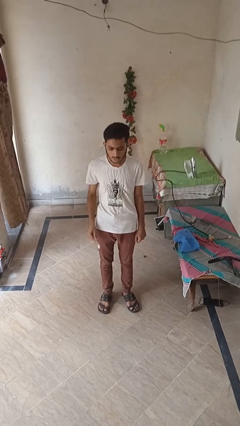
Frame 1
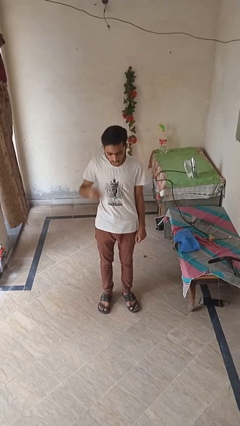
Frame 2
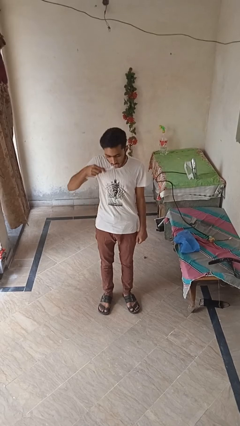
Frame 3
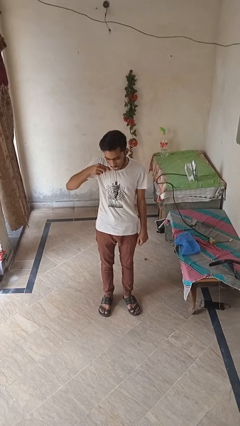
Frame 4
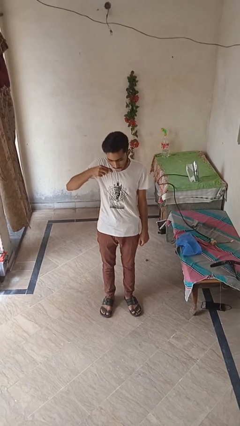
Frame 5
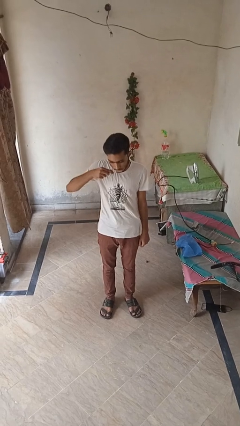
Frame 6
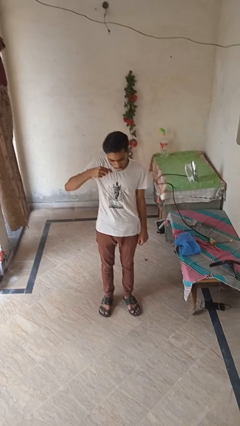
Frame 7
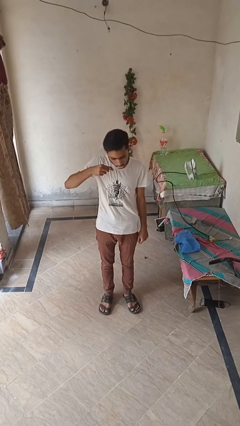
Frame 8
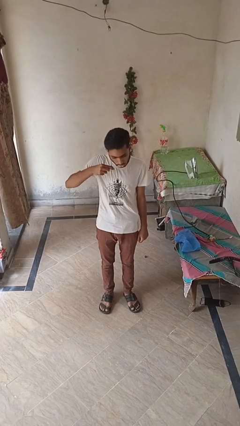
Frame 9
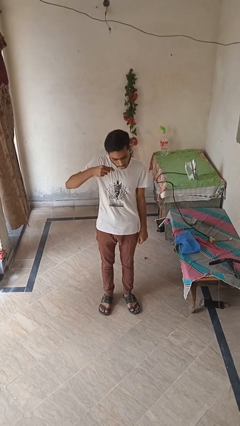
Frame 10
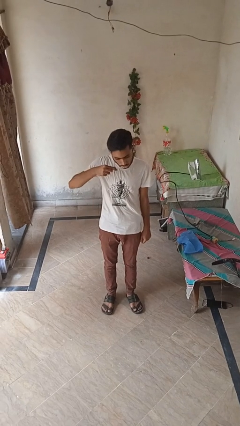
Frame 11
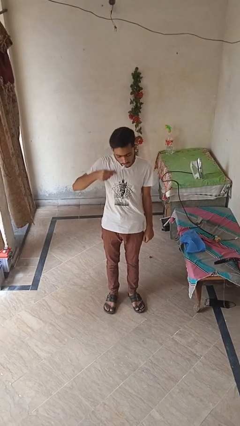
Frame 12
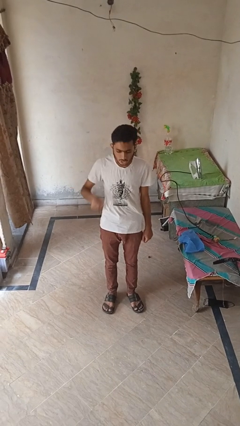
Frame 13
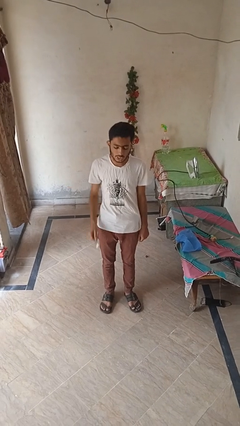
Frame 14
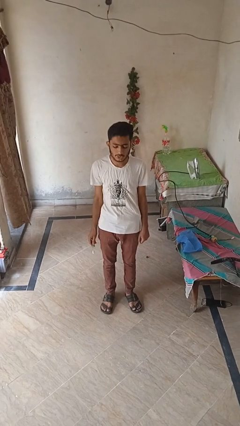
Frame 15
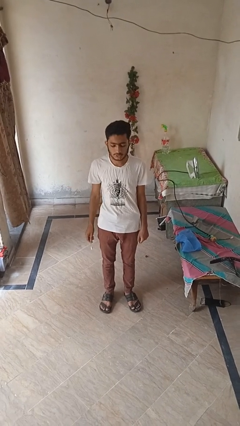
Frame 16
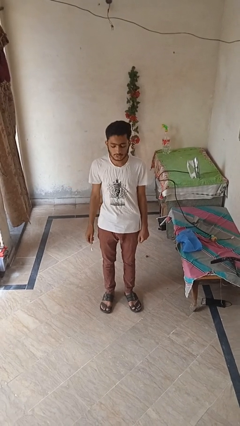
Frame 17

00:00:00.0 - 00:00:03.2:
person brushes teeth

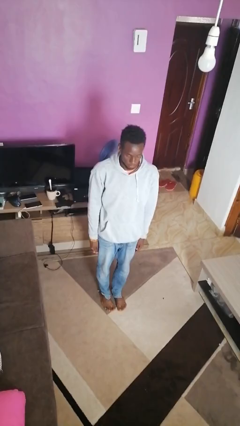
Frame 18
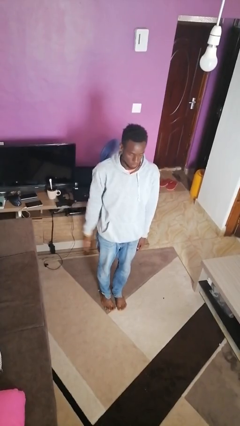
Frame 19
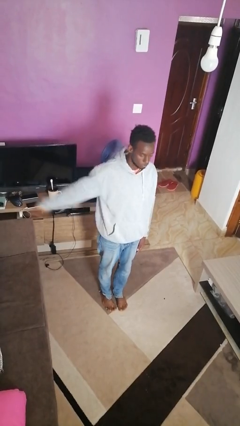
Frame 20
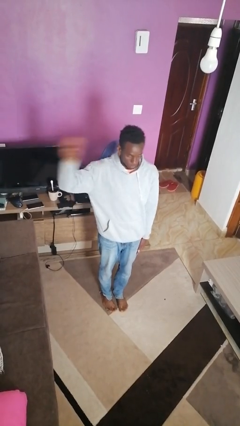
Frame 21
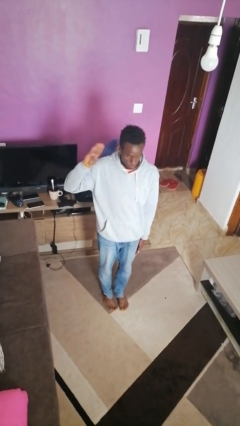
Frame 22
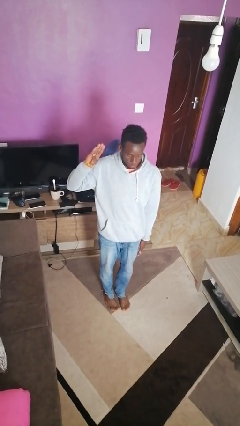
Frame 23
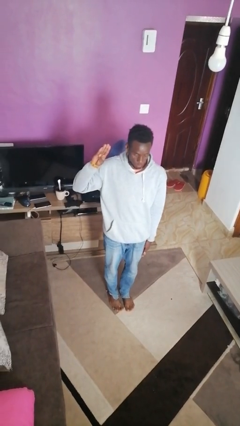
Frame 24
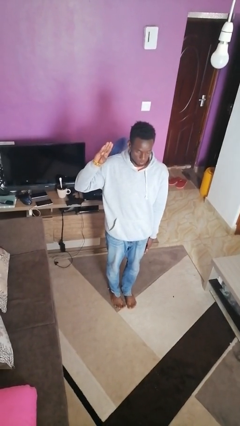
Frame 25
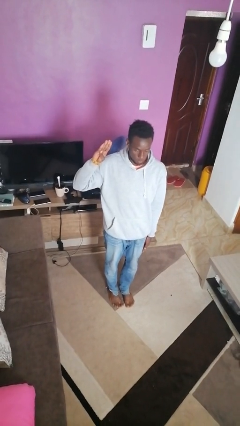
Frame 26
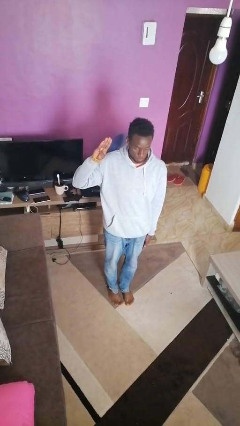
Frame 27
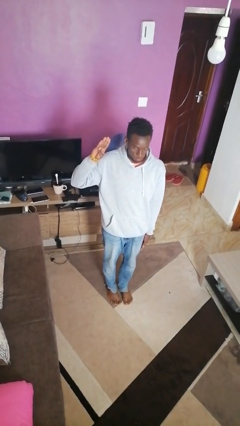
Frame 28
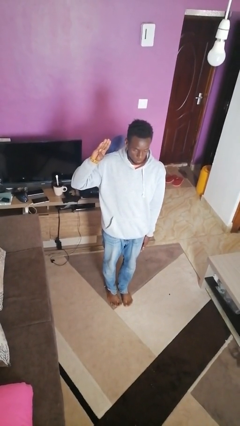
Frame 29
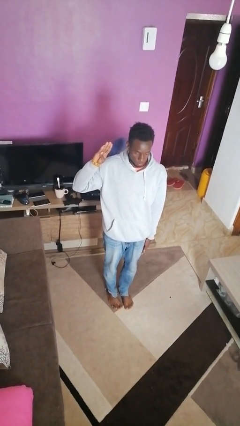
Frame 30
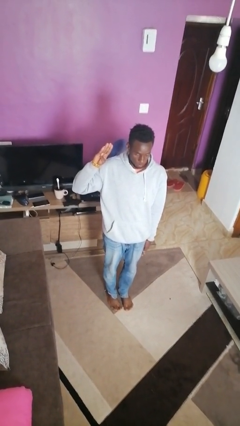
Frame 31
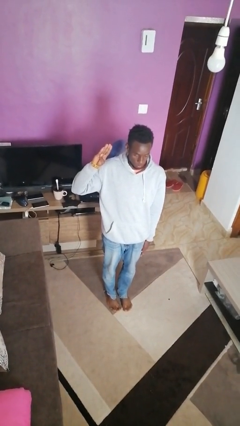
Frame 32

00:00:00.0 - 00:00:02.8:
person salutes

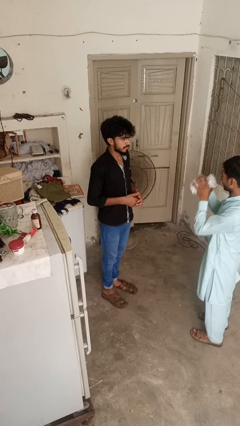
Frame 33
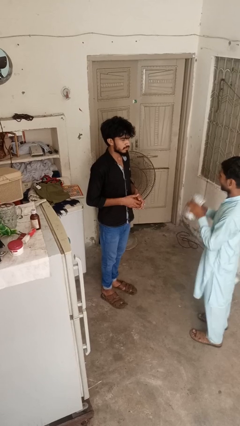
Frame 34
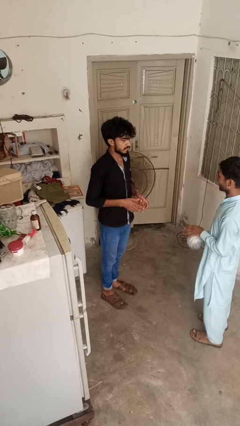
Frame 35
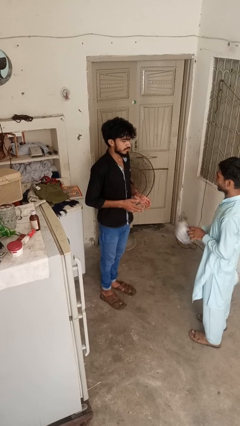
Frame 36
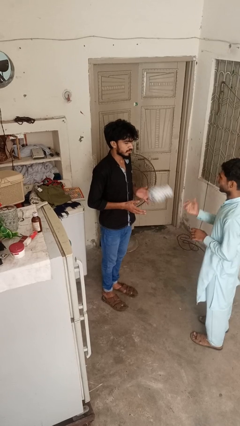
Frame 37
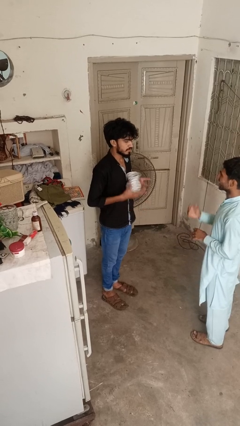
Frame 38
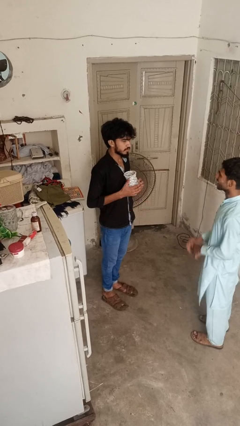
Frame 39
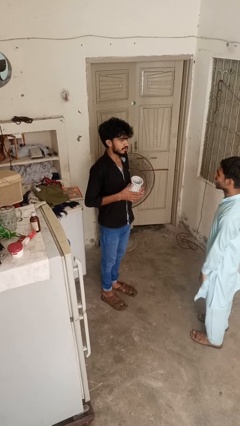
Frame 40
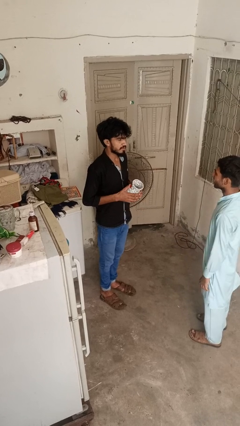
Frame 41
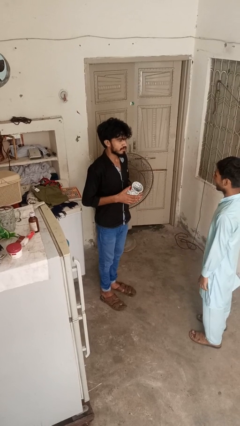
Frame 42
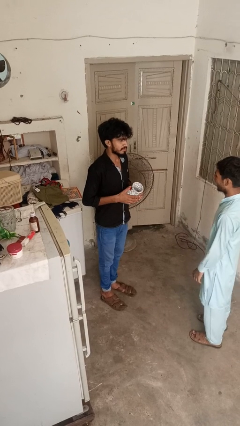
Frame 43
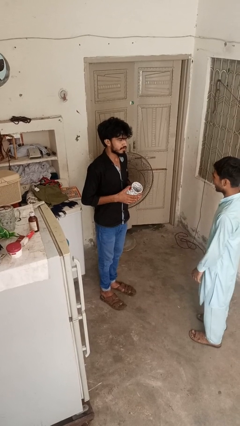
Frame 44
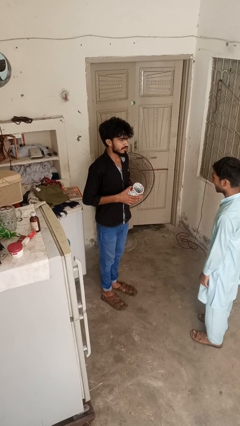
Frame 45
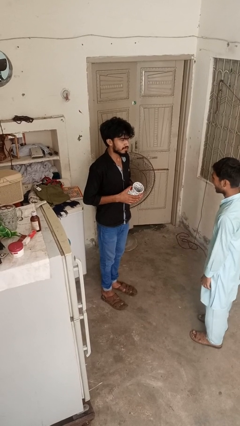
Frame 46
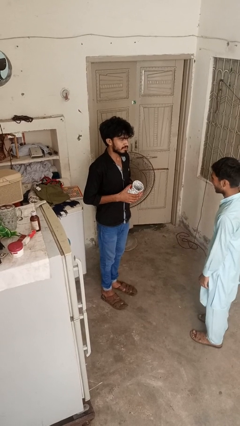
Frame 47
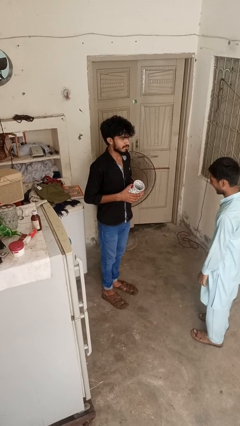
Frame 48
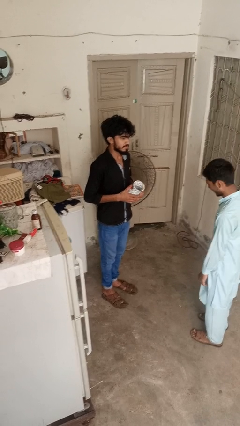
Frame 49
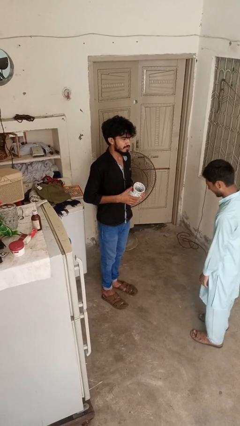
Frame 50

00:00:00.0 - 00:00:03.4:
person catches object from person

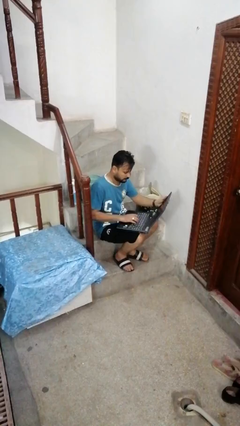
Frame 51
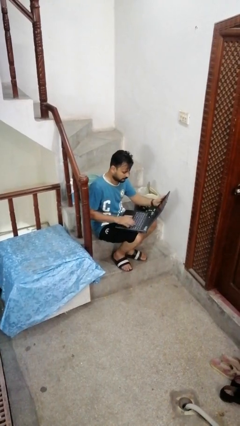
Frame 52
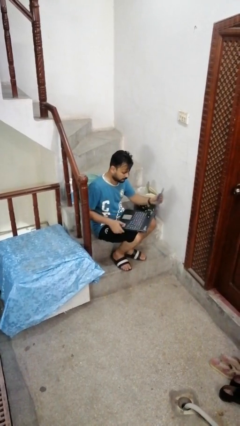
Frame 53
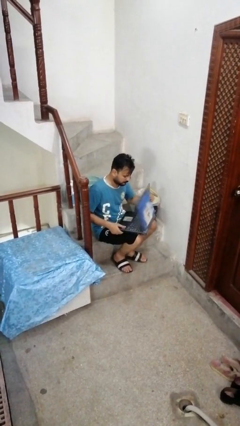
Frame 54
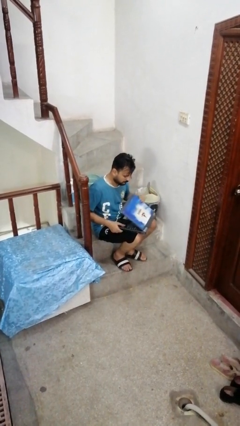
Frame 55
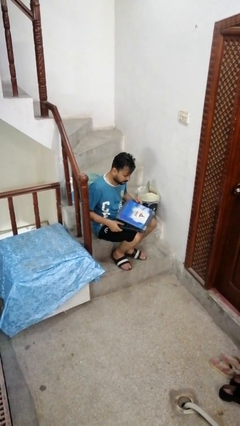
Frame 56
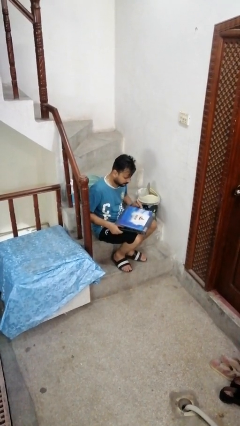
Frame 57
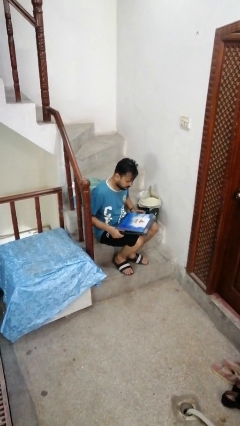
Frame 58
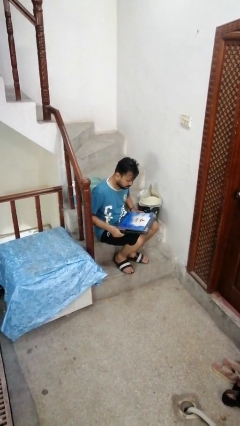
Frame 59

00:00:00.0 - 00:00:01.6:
person closes laptop

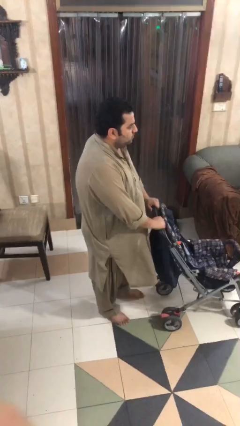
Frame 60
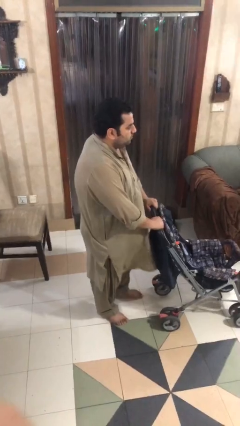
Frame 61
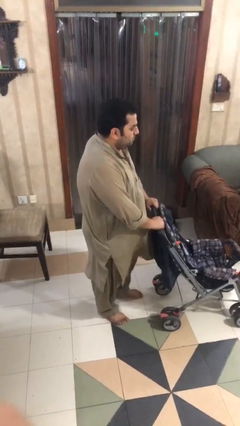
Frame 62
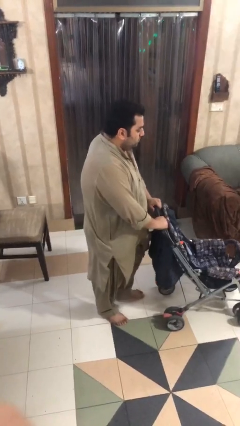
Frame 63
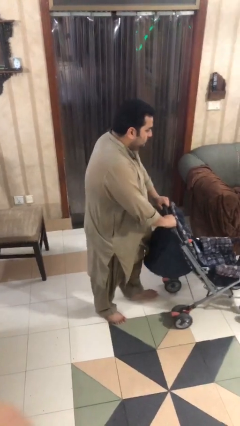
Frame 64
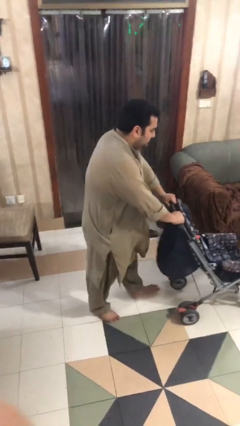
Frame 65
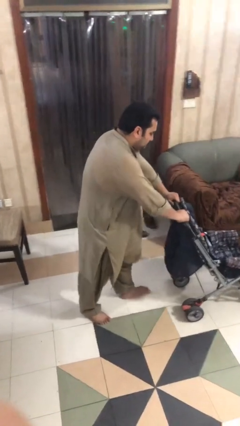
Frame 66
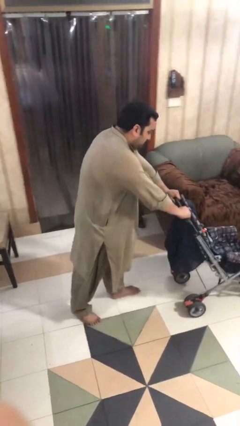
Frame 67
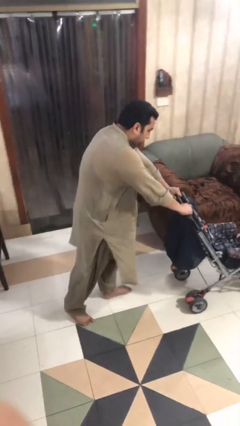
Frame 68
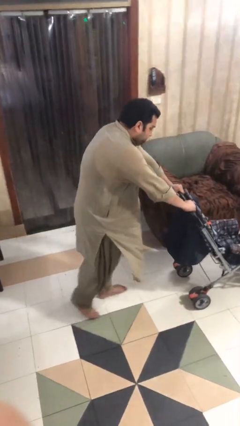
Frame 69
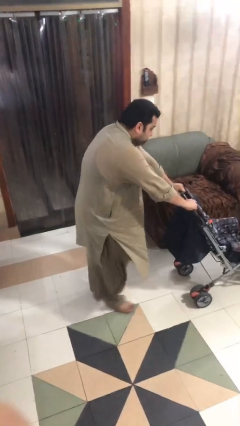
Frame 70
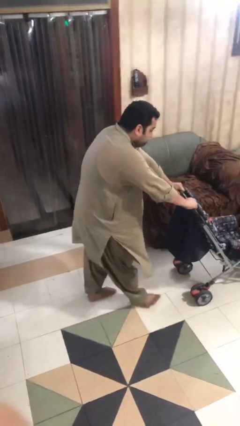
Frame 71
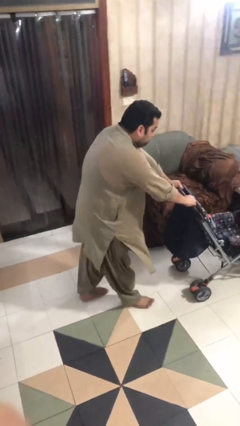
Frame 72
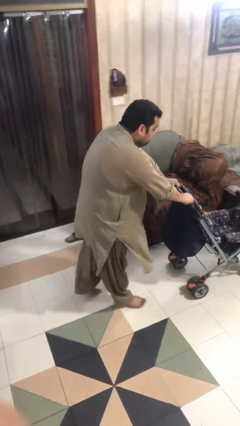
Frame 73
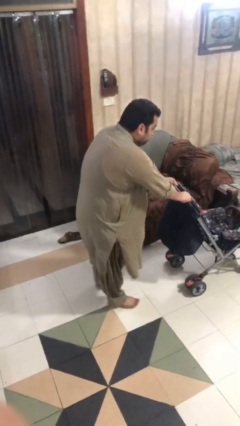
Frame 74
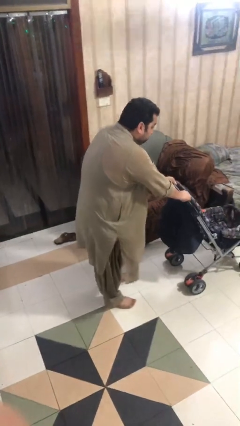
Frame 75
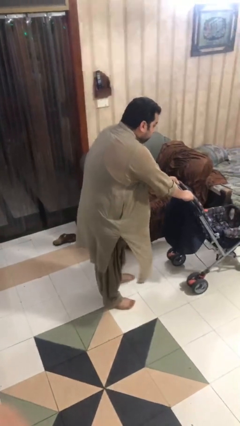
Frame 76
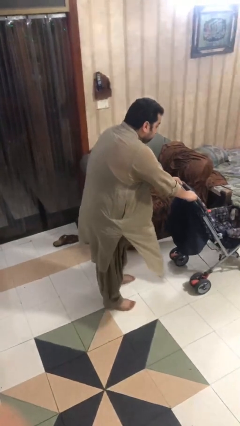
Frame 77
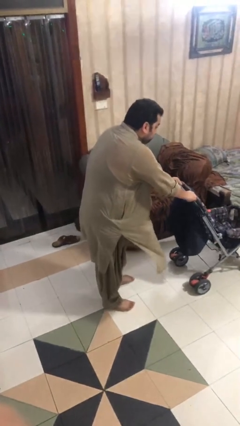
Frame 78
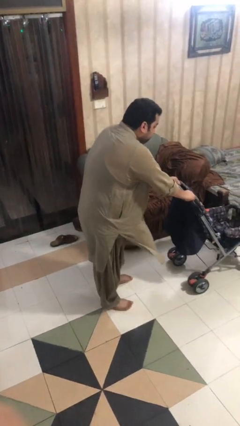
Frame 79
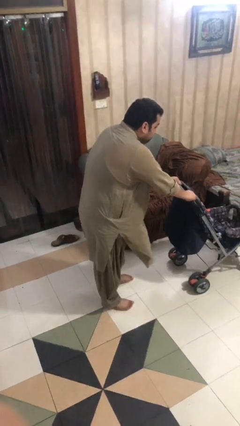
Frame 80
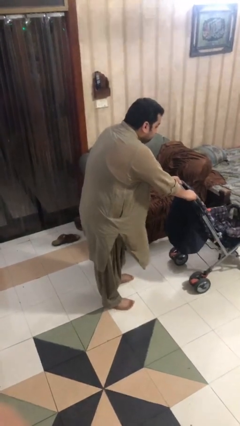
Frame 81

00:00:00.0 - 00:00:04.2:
person pushes wheeled cart

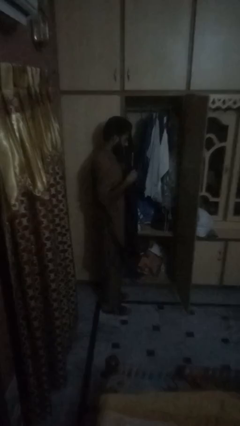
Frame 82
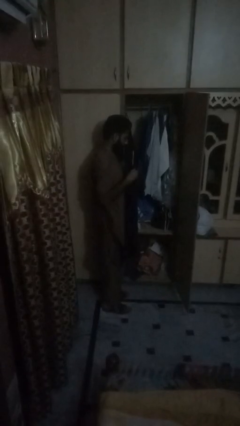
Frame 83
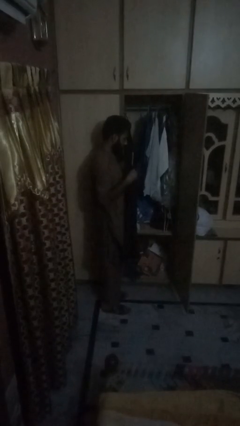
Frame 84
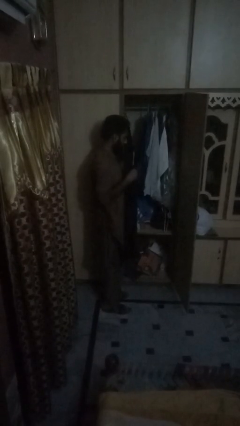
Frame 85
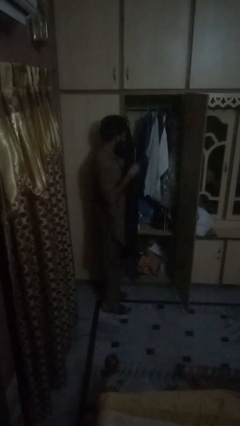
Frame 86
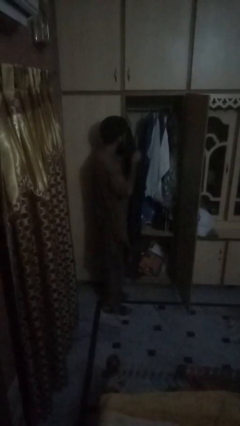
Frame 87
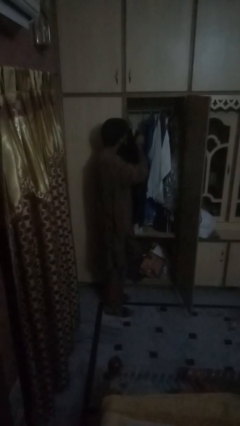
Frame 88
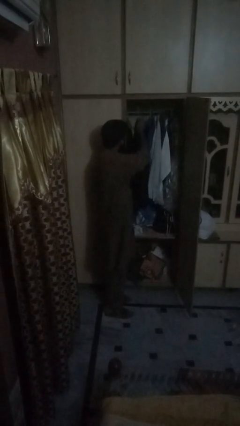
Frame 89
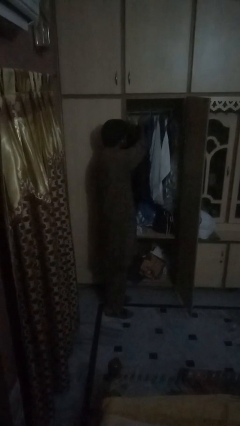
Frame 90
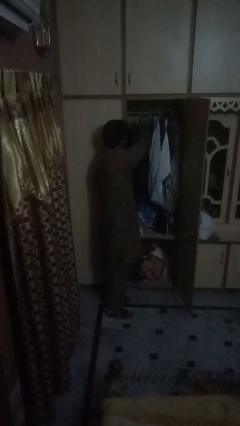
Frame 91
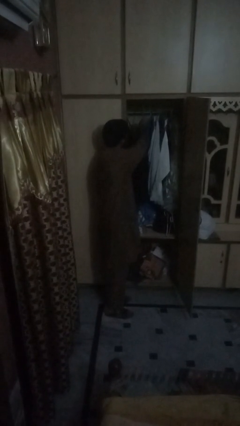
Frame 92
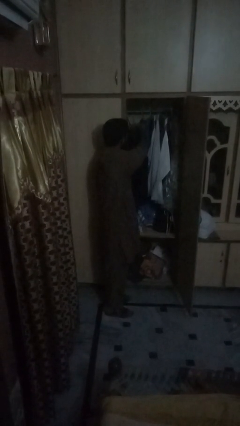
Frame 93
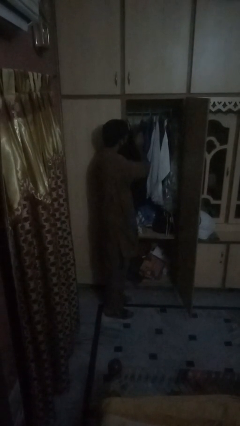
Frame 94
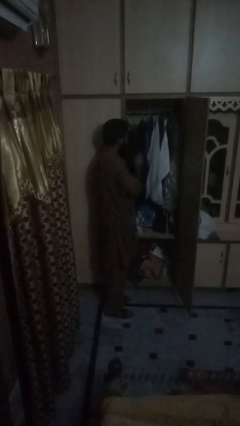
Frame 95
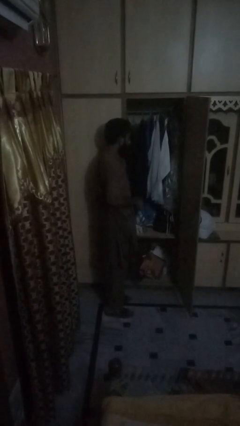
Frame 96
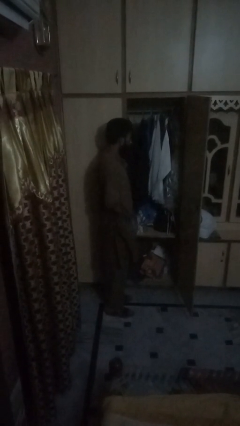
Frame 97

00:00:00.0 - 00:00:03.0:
person takes clothes from dresser
